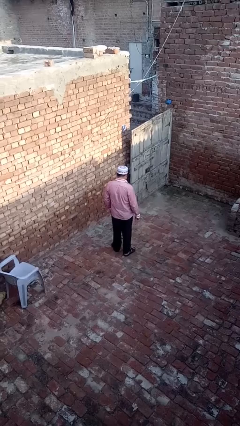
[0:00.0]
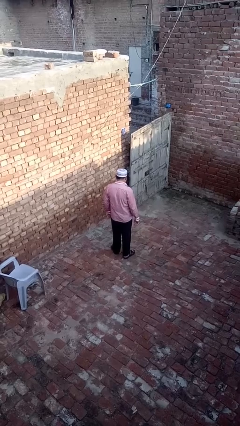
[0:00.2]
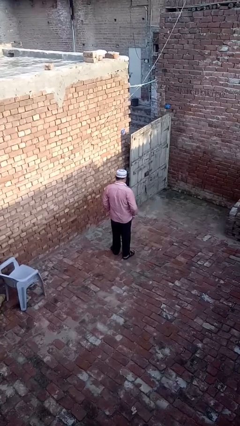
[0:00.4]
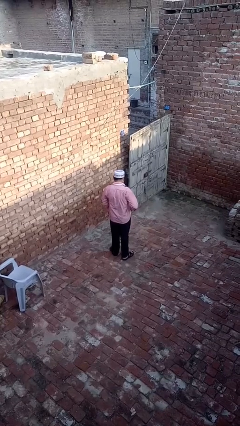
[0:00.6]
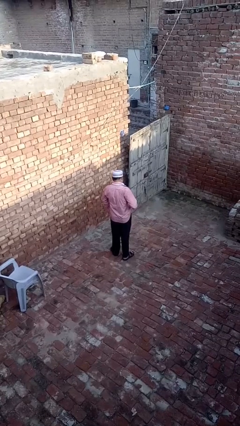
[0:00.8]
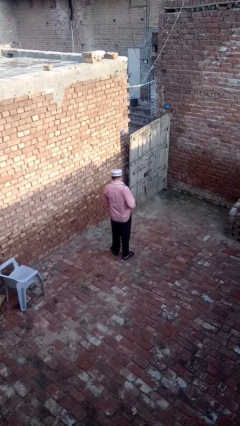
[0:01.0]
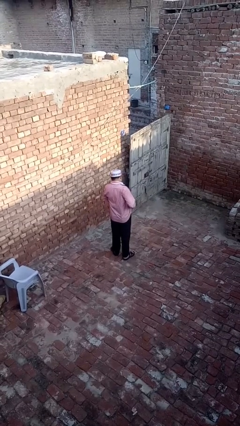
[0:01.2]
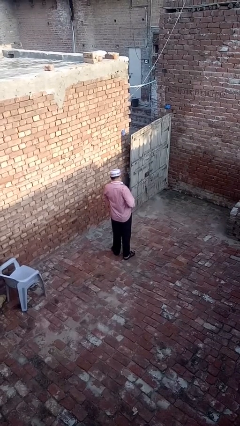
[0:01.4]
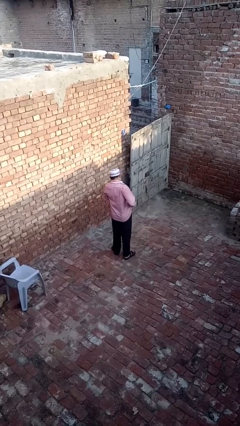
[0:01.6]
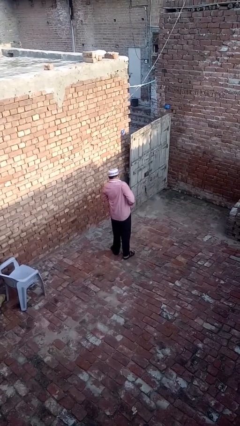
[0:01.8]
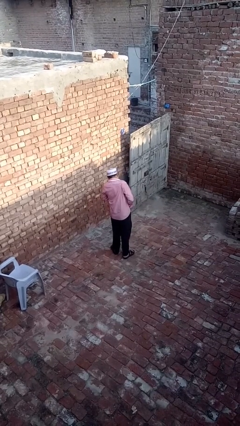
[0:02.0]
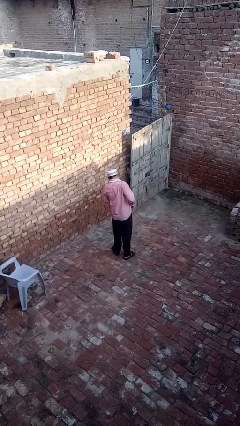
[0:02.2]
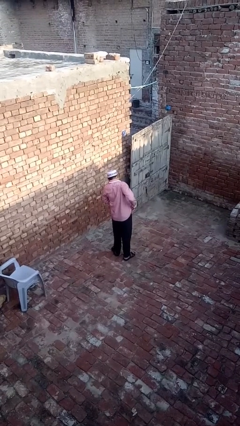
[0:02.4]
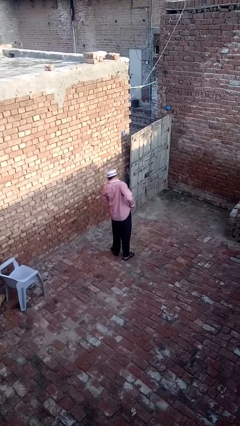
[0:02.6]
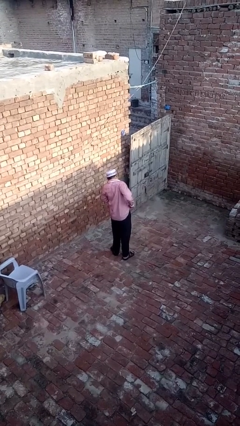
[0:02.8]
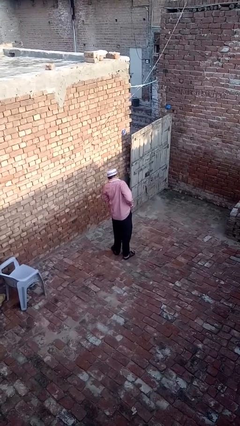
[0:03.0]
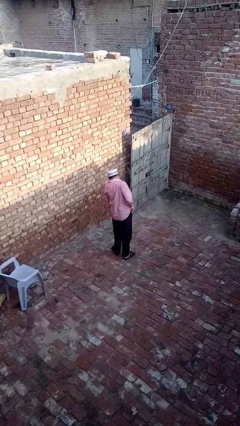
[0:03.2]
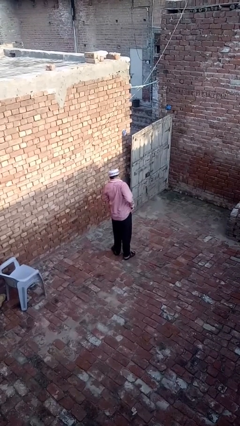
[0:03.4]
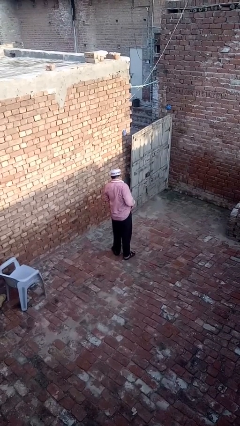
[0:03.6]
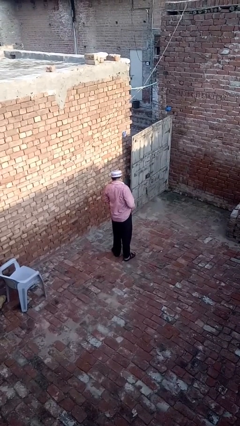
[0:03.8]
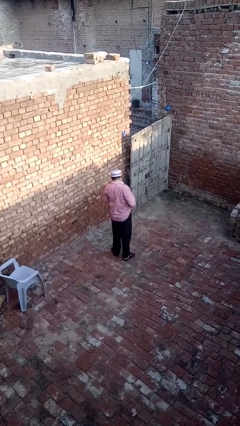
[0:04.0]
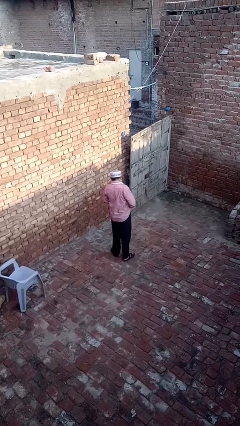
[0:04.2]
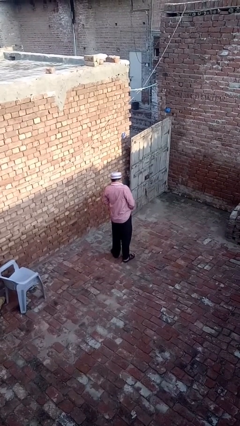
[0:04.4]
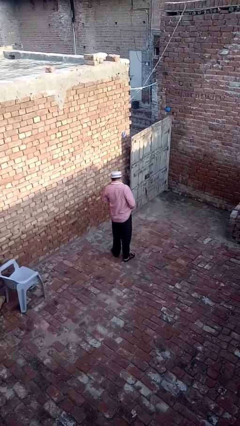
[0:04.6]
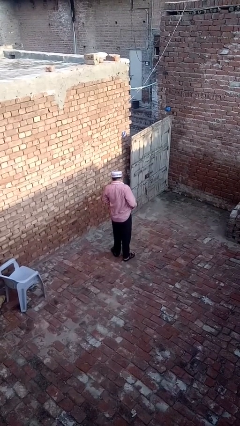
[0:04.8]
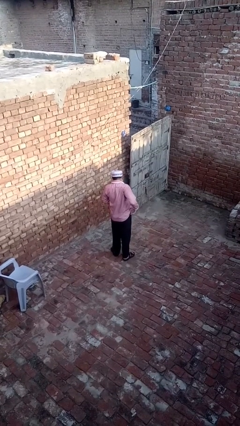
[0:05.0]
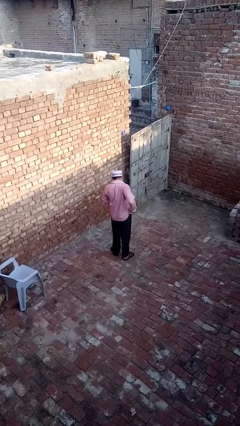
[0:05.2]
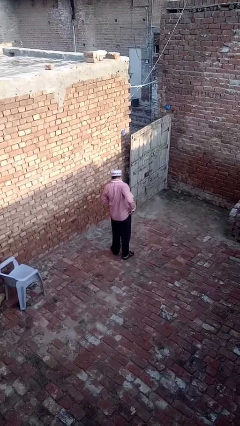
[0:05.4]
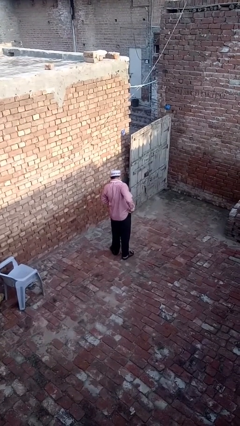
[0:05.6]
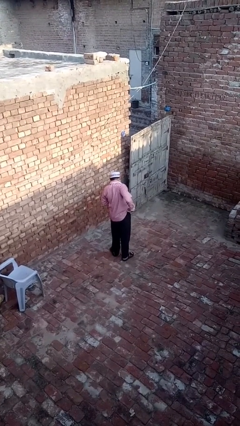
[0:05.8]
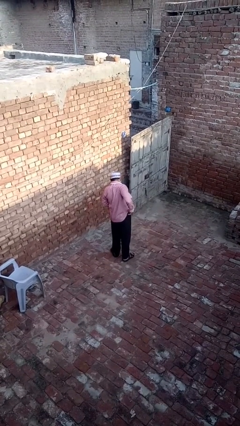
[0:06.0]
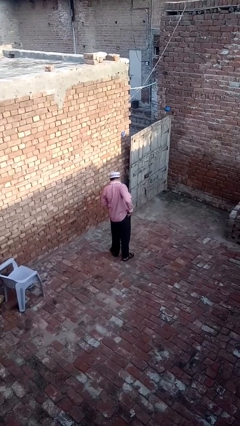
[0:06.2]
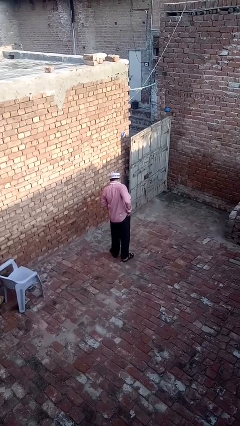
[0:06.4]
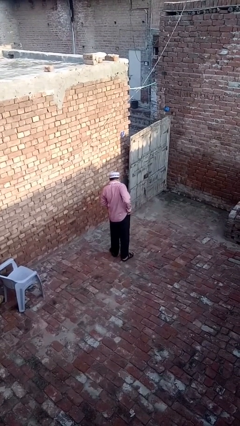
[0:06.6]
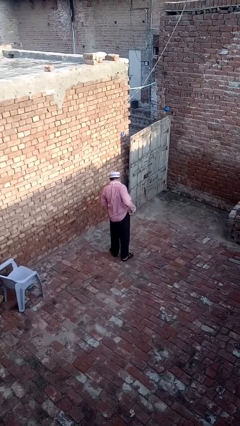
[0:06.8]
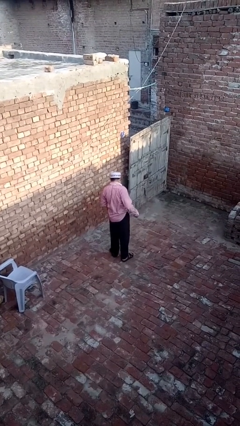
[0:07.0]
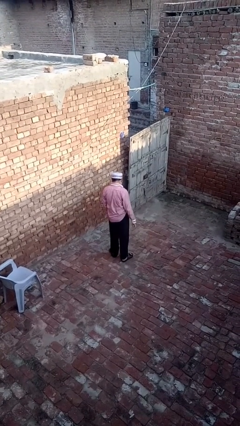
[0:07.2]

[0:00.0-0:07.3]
person tucks in shirt

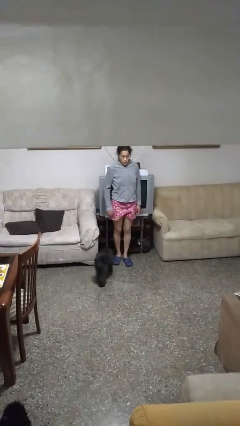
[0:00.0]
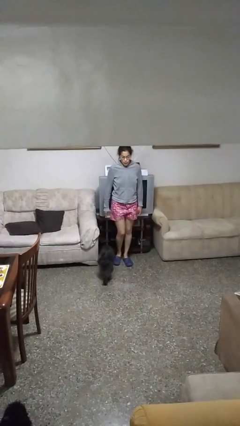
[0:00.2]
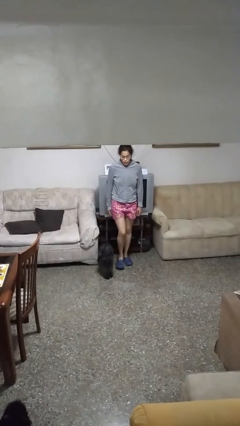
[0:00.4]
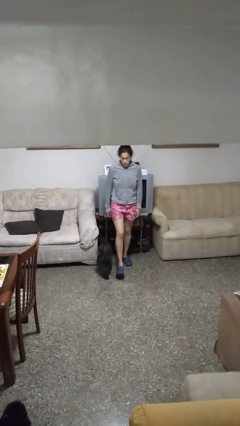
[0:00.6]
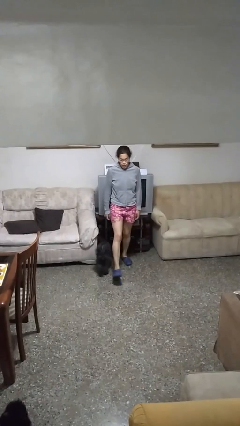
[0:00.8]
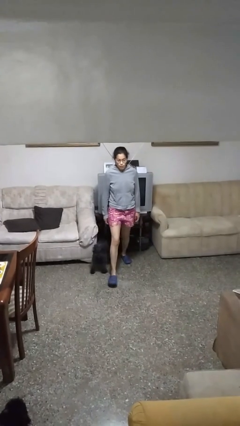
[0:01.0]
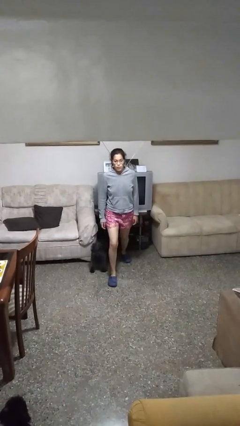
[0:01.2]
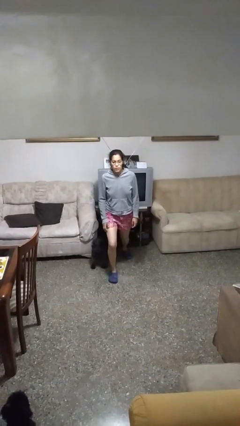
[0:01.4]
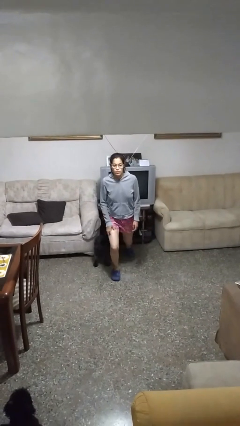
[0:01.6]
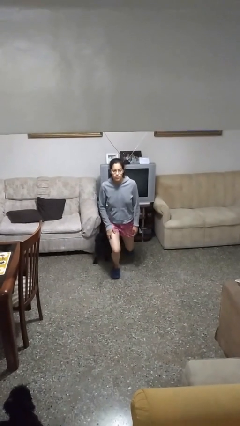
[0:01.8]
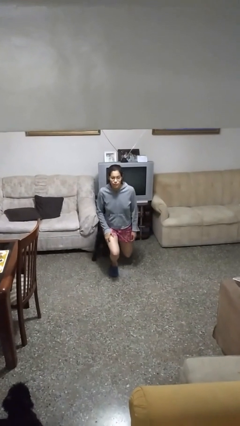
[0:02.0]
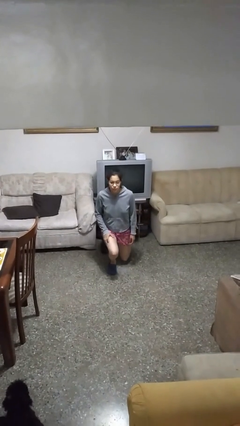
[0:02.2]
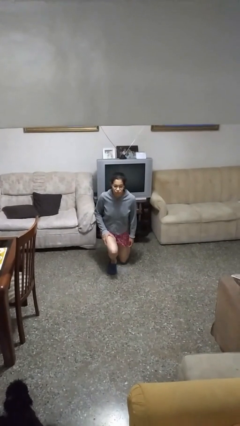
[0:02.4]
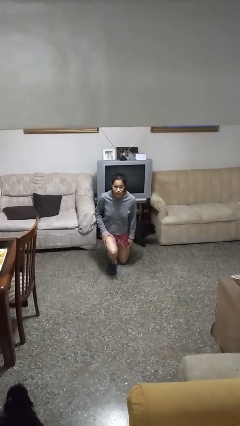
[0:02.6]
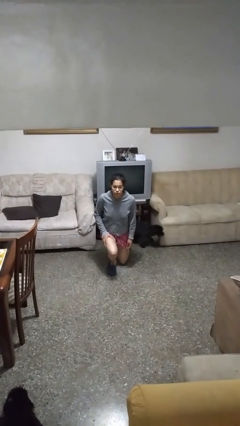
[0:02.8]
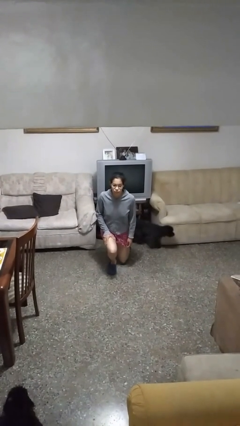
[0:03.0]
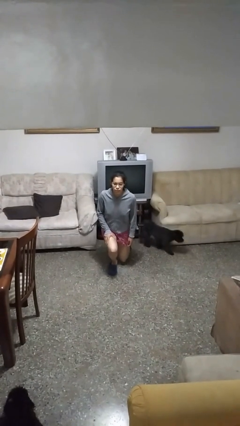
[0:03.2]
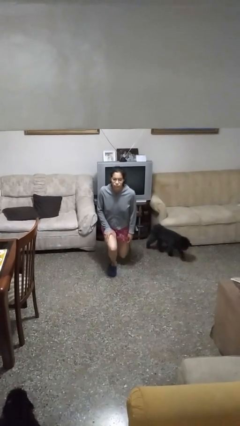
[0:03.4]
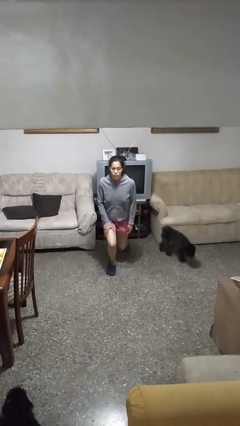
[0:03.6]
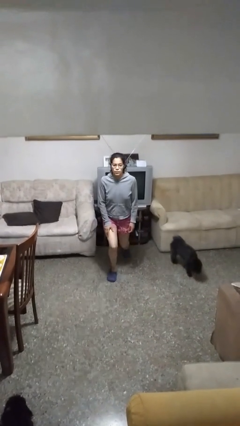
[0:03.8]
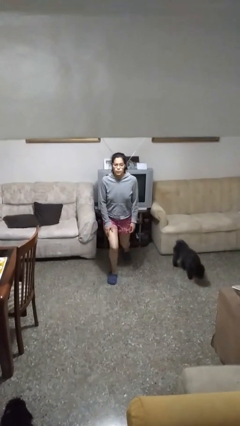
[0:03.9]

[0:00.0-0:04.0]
person exercises with lunges

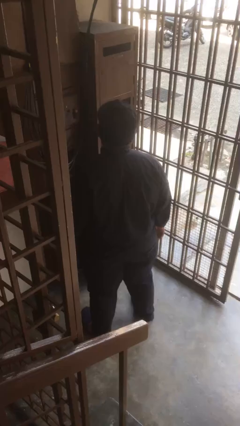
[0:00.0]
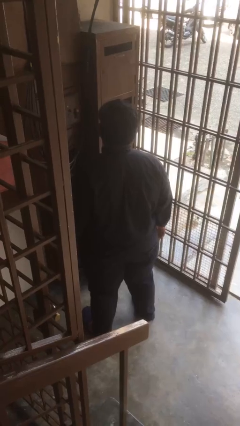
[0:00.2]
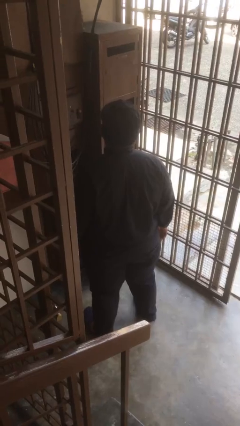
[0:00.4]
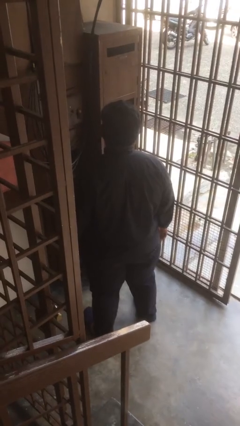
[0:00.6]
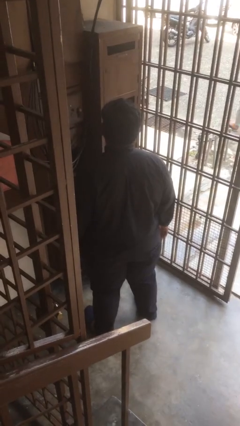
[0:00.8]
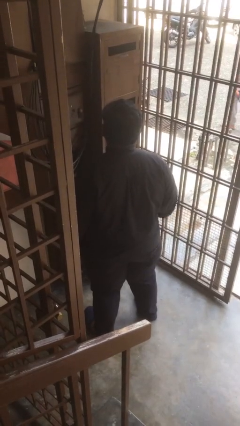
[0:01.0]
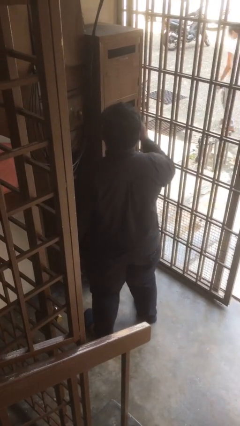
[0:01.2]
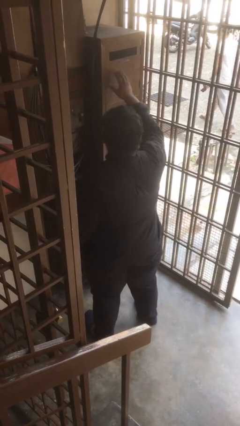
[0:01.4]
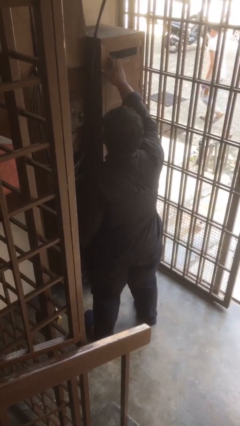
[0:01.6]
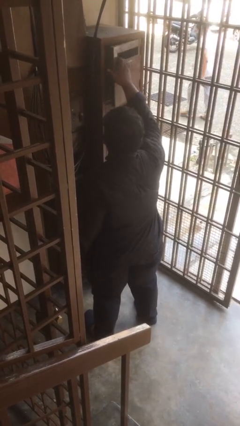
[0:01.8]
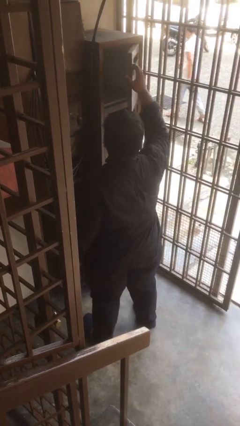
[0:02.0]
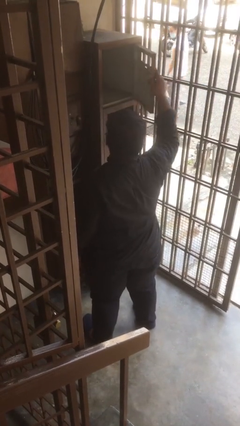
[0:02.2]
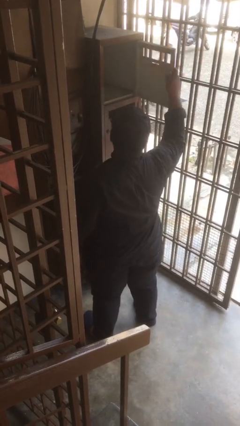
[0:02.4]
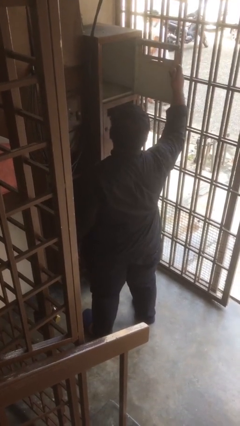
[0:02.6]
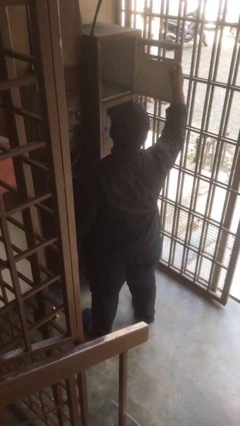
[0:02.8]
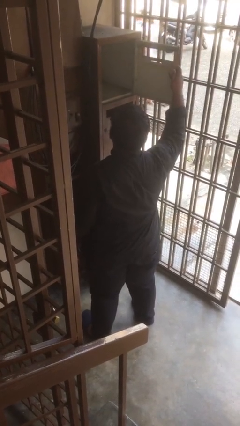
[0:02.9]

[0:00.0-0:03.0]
person opens mailbox

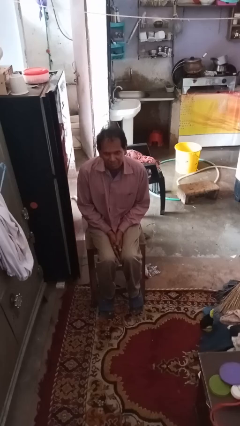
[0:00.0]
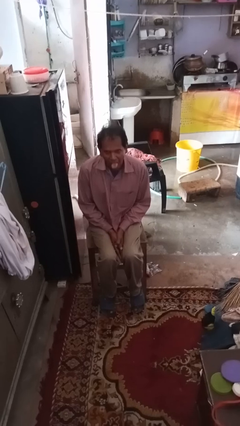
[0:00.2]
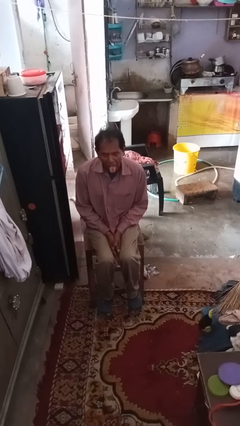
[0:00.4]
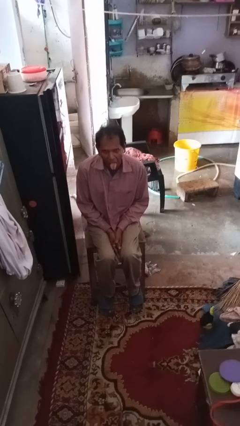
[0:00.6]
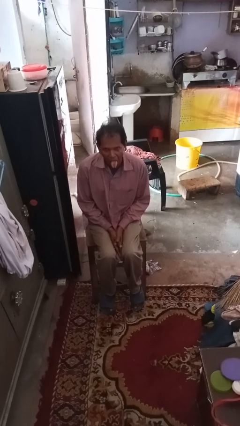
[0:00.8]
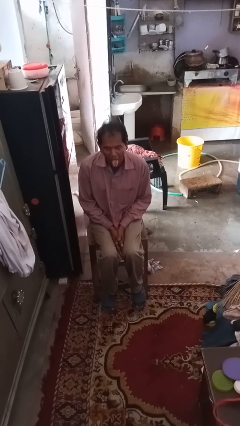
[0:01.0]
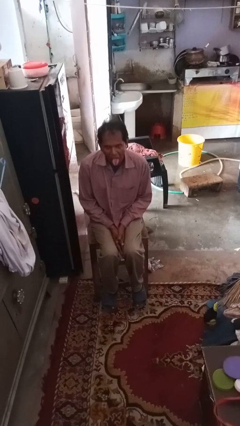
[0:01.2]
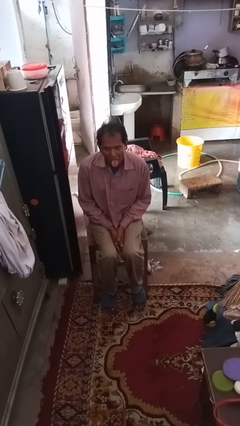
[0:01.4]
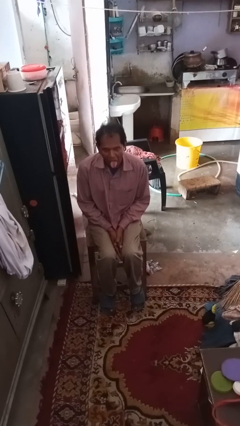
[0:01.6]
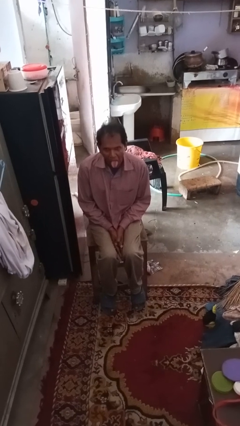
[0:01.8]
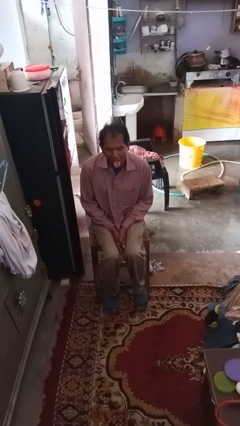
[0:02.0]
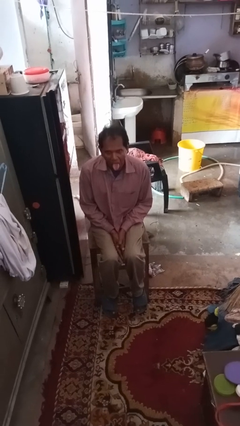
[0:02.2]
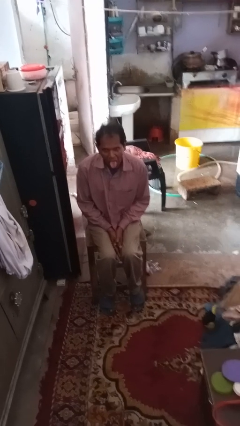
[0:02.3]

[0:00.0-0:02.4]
person sticks out tongue

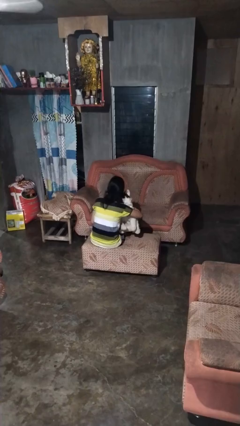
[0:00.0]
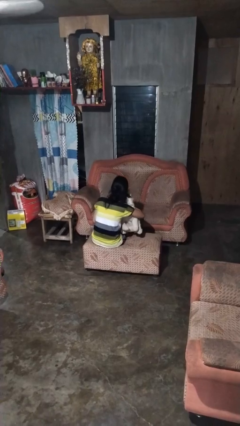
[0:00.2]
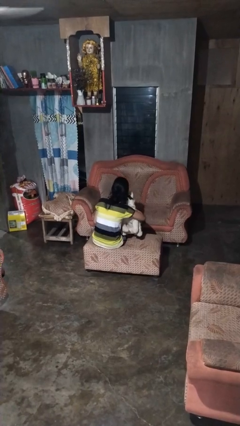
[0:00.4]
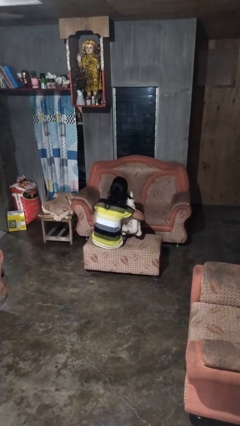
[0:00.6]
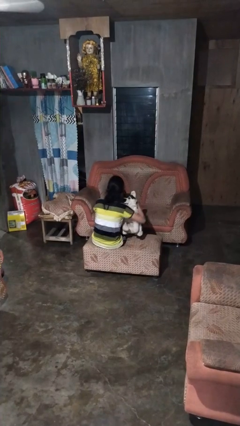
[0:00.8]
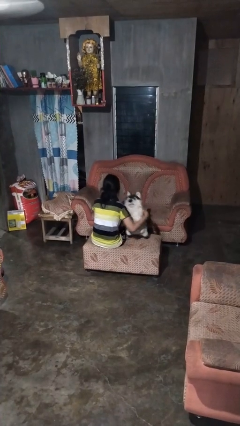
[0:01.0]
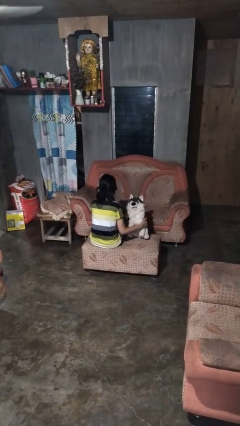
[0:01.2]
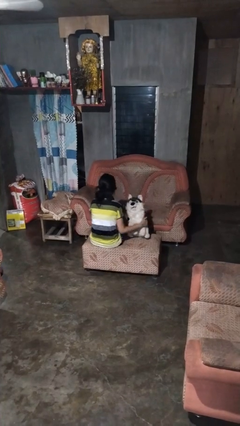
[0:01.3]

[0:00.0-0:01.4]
person hugs stuffed animal
